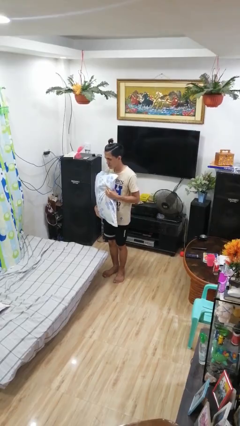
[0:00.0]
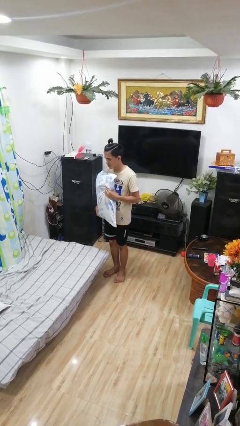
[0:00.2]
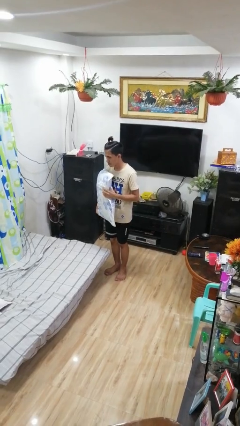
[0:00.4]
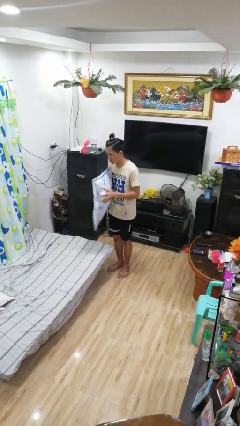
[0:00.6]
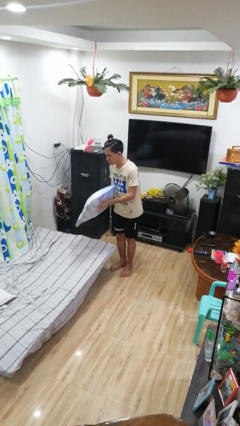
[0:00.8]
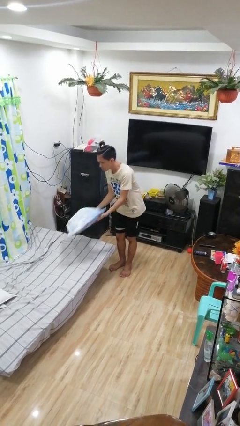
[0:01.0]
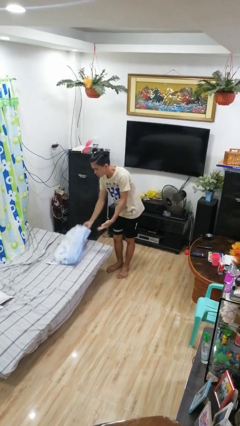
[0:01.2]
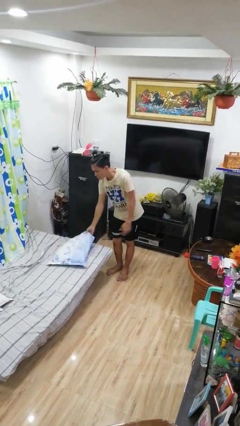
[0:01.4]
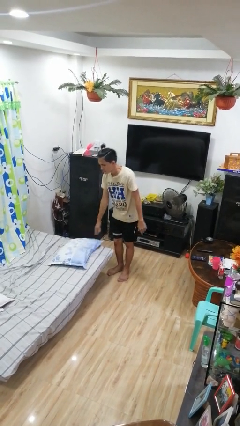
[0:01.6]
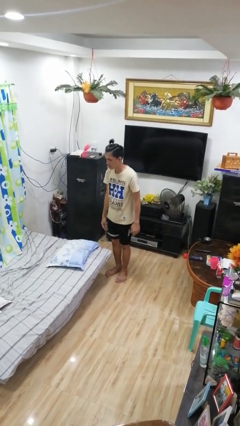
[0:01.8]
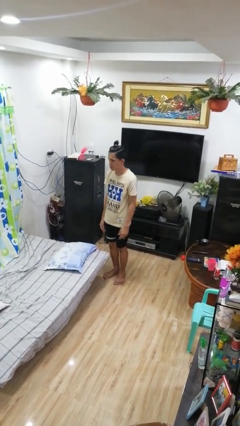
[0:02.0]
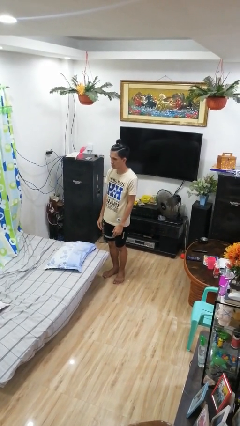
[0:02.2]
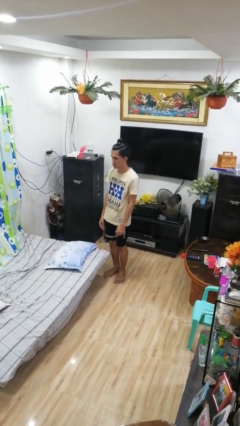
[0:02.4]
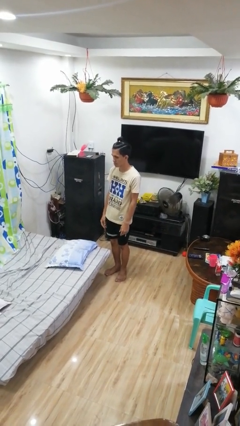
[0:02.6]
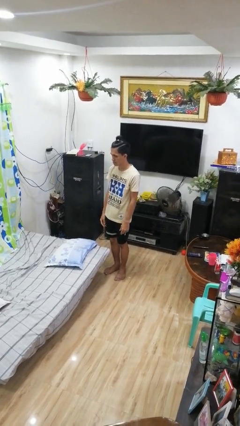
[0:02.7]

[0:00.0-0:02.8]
person puts down object on bed

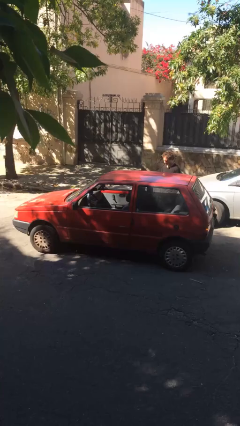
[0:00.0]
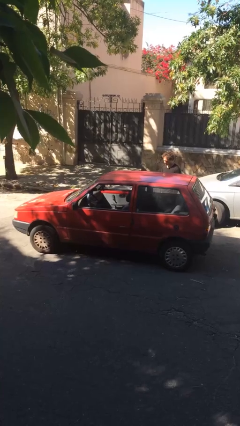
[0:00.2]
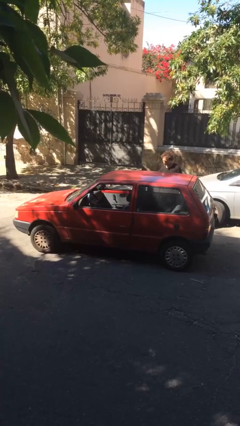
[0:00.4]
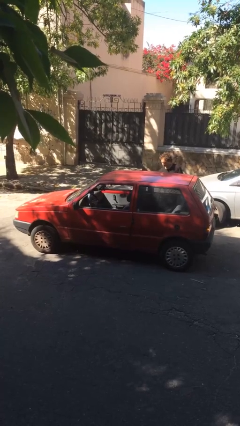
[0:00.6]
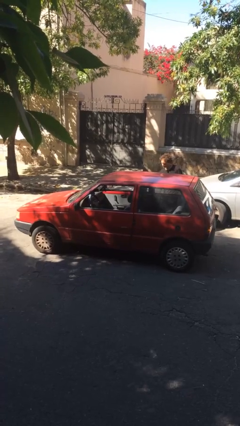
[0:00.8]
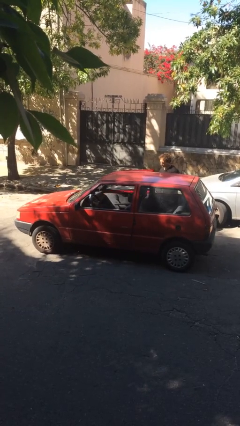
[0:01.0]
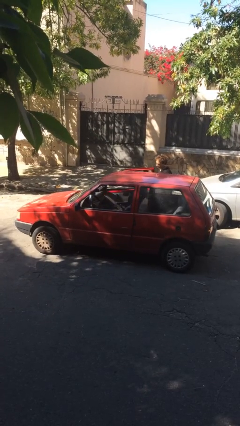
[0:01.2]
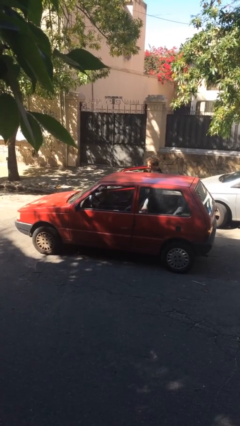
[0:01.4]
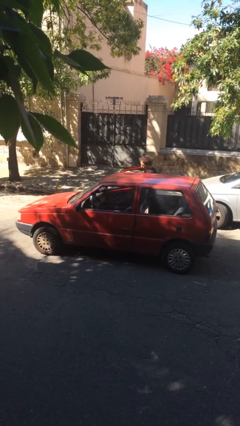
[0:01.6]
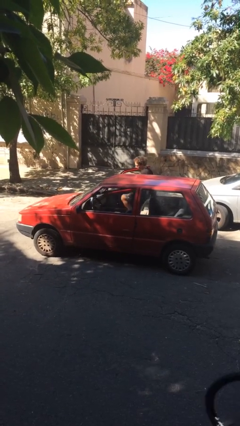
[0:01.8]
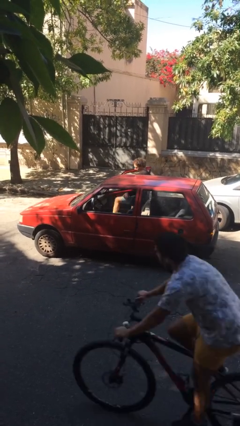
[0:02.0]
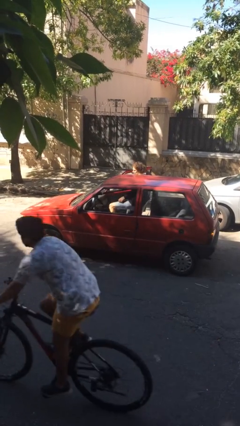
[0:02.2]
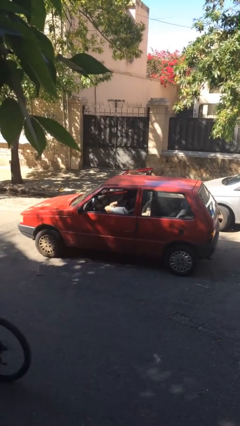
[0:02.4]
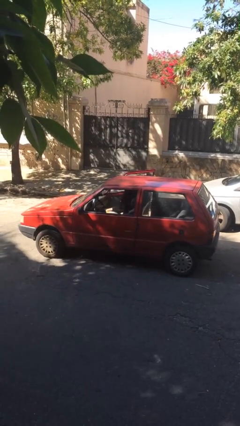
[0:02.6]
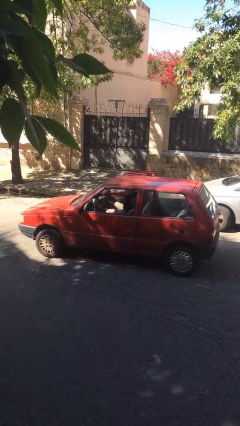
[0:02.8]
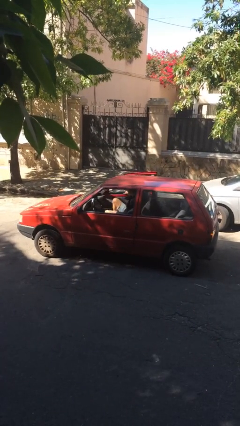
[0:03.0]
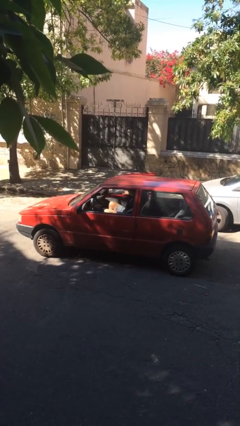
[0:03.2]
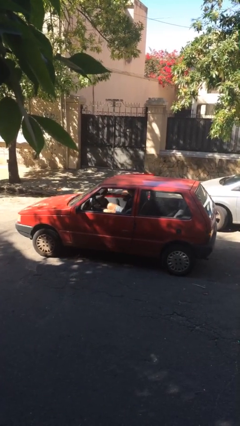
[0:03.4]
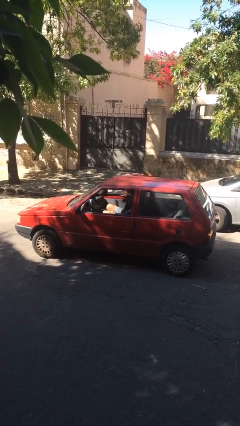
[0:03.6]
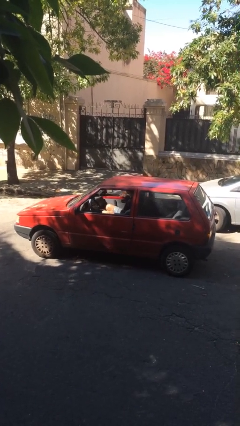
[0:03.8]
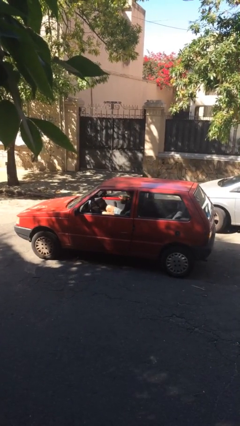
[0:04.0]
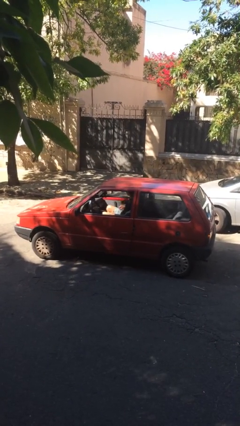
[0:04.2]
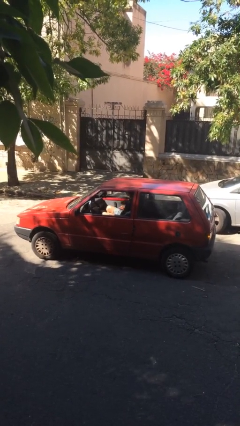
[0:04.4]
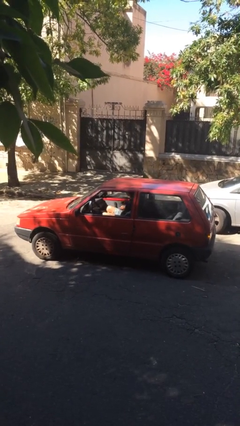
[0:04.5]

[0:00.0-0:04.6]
car picks up person

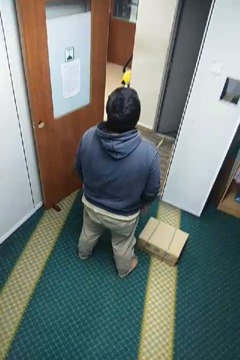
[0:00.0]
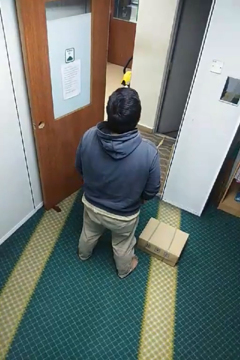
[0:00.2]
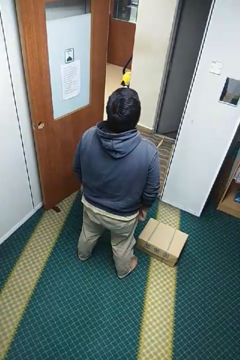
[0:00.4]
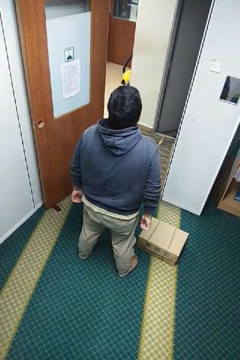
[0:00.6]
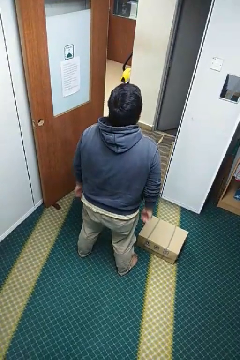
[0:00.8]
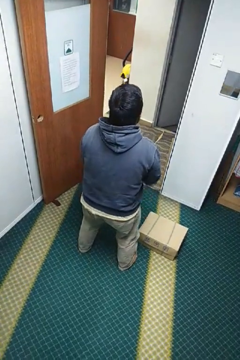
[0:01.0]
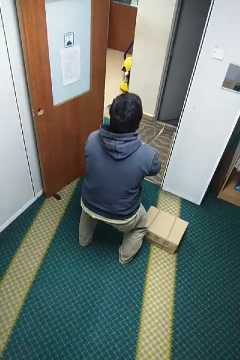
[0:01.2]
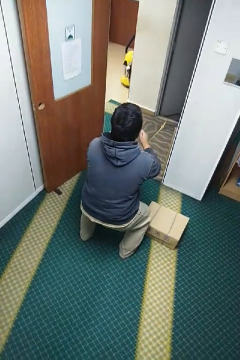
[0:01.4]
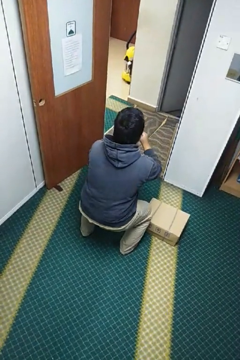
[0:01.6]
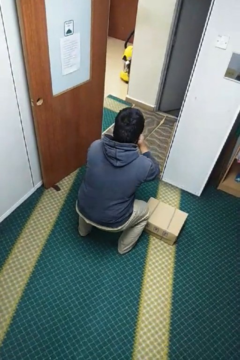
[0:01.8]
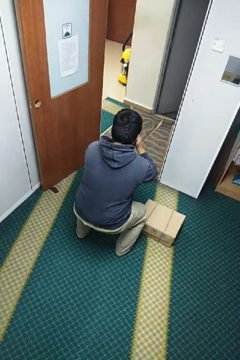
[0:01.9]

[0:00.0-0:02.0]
person squats

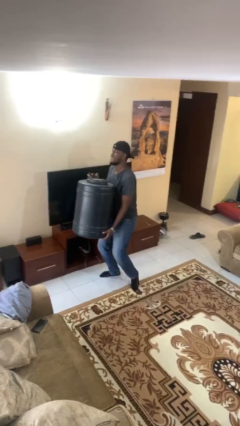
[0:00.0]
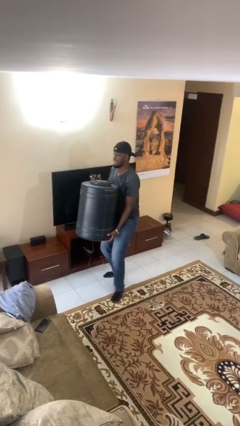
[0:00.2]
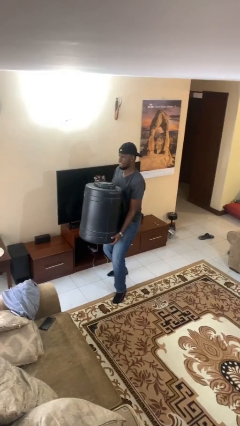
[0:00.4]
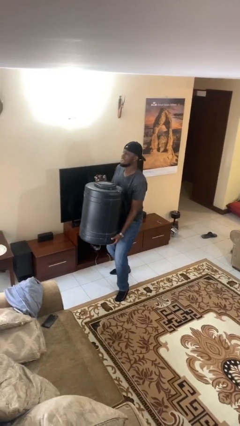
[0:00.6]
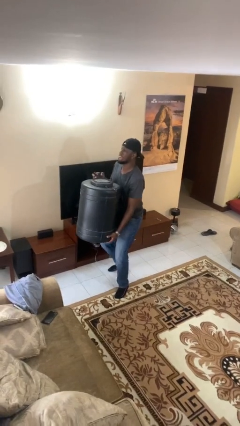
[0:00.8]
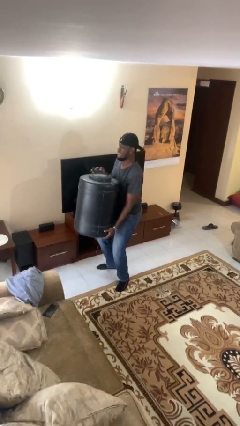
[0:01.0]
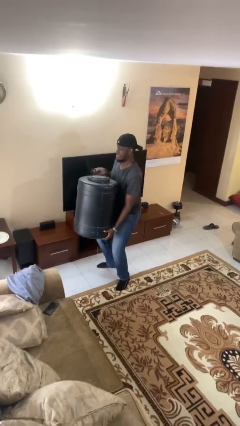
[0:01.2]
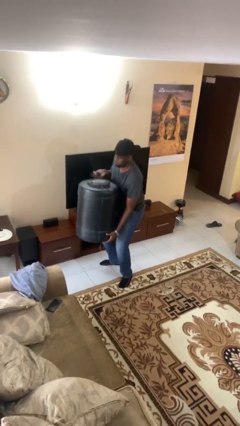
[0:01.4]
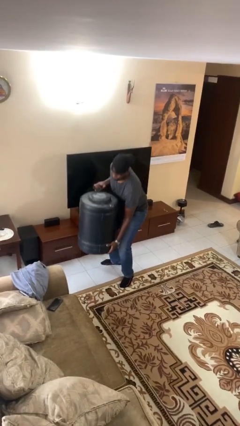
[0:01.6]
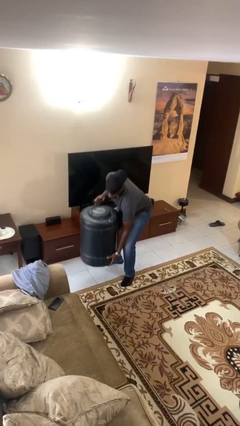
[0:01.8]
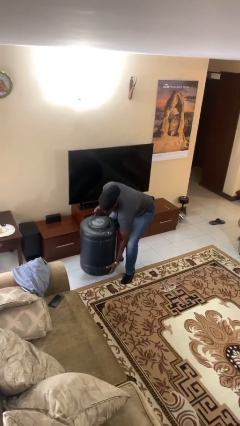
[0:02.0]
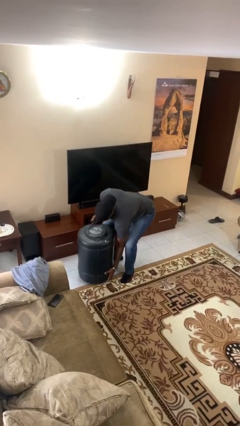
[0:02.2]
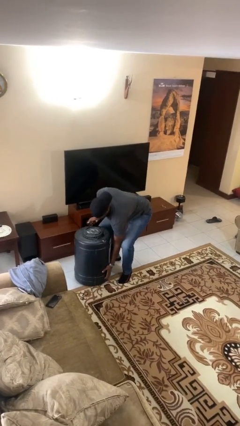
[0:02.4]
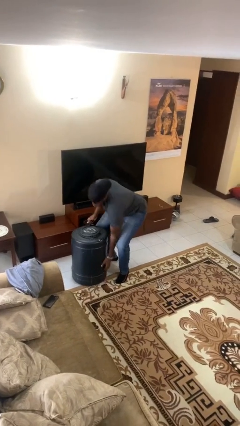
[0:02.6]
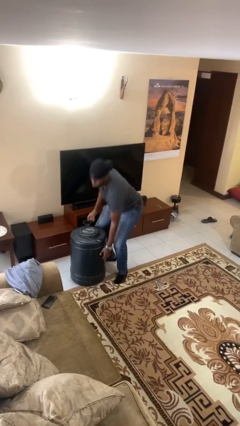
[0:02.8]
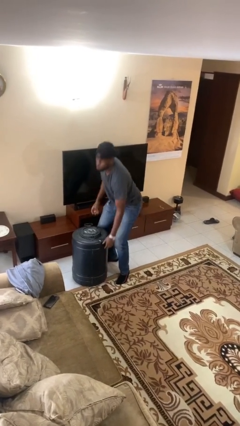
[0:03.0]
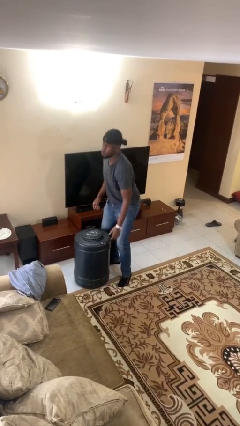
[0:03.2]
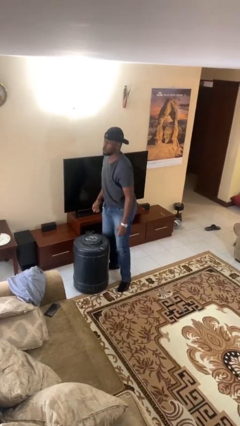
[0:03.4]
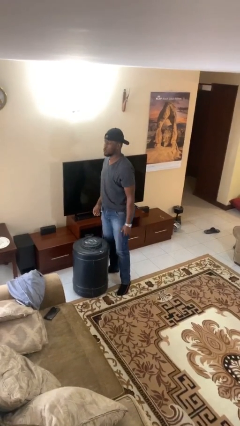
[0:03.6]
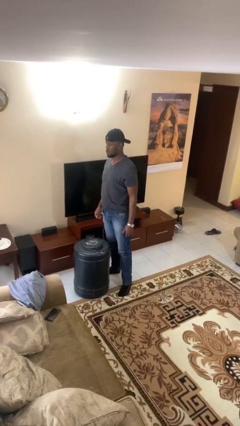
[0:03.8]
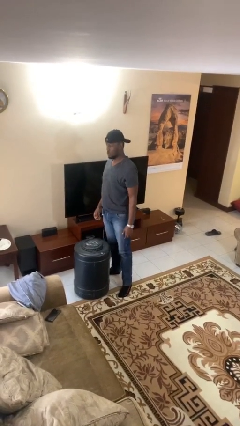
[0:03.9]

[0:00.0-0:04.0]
person puts down object on floor

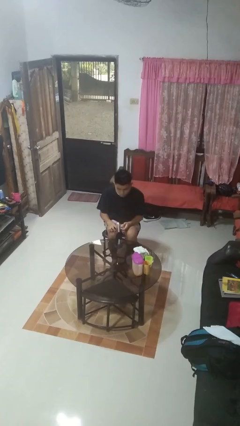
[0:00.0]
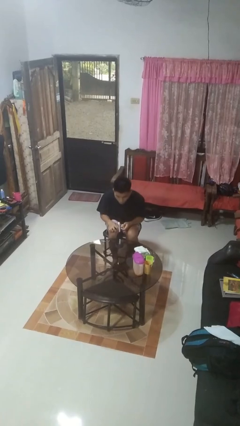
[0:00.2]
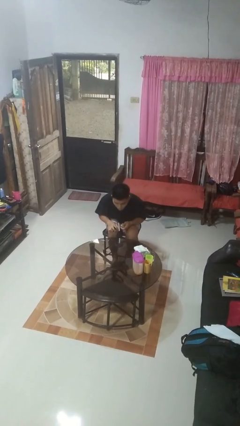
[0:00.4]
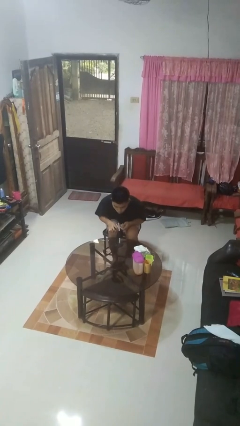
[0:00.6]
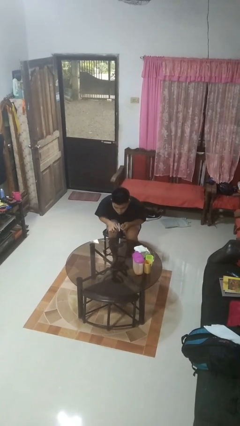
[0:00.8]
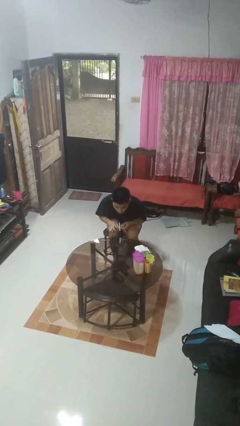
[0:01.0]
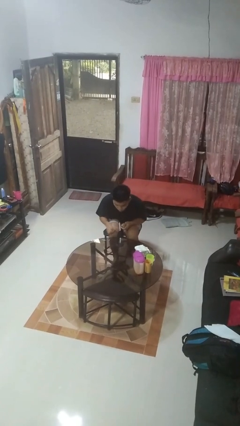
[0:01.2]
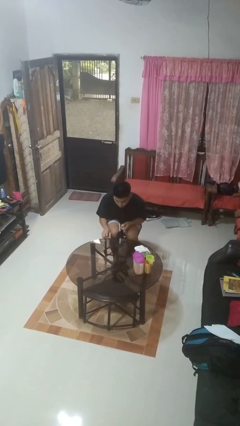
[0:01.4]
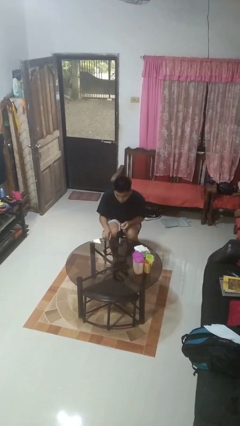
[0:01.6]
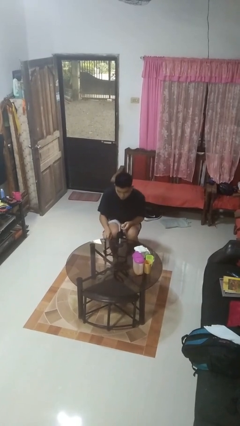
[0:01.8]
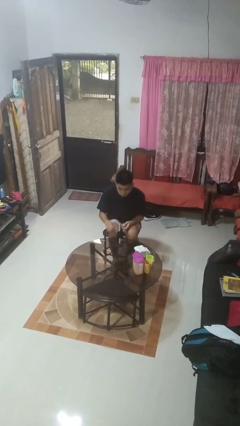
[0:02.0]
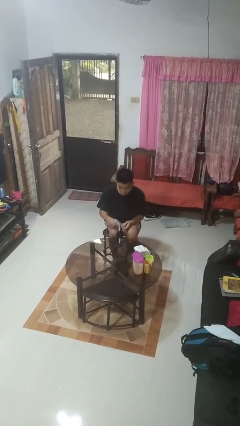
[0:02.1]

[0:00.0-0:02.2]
person extinguishes candle

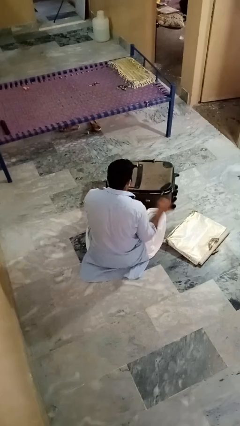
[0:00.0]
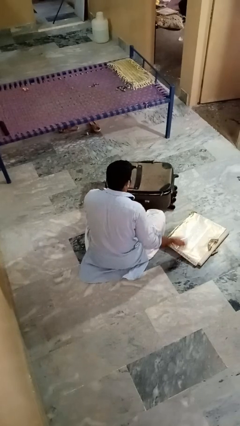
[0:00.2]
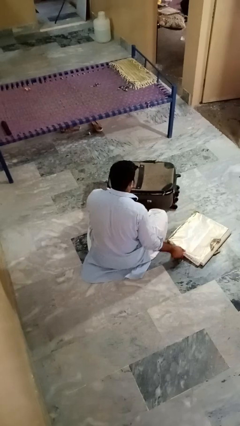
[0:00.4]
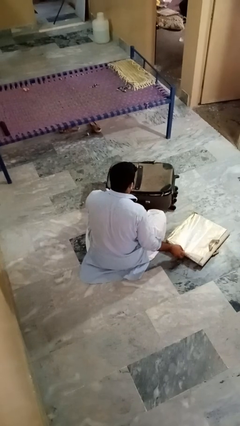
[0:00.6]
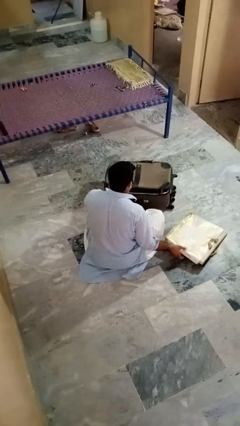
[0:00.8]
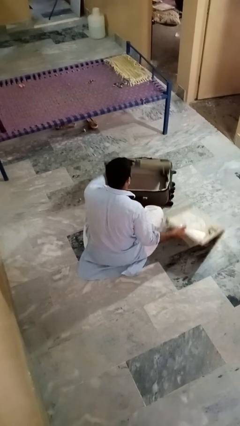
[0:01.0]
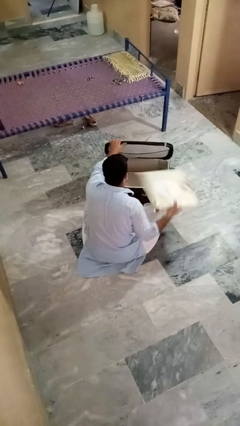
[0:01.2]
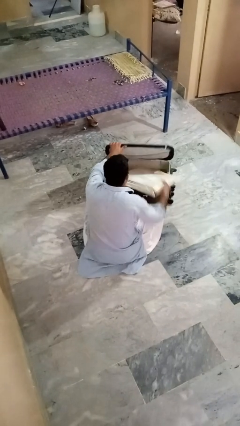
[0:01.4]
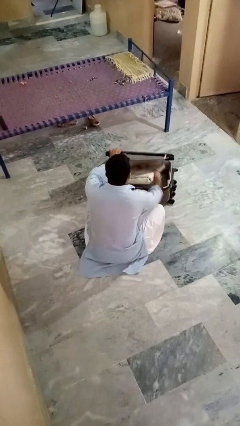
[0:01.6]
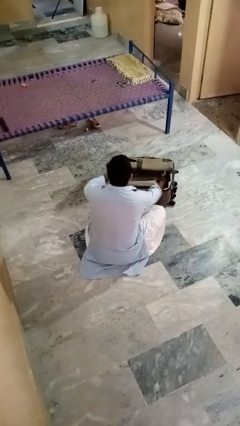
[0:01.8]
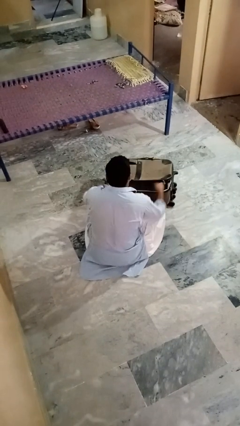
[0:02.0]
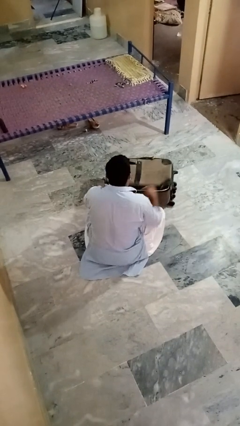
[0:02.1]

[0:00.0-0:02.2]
person puts object into bag
